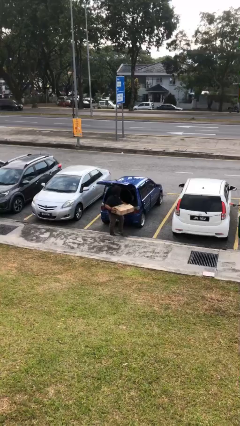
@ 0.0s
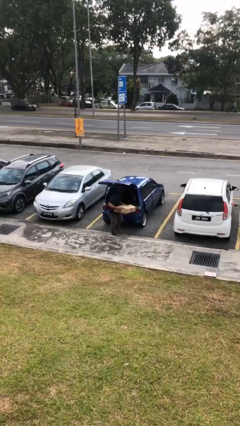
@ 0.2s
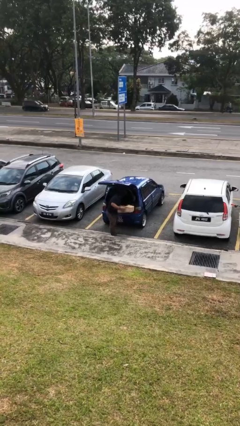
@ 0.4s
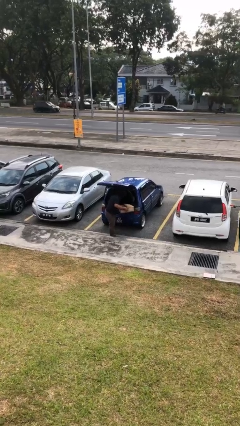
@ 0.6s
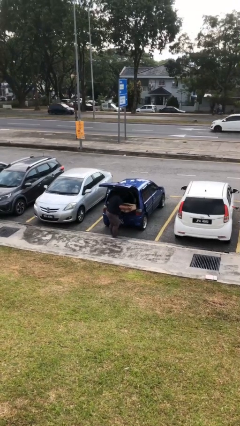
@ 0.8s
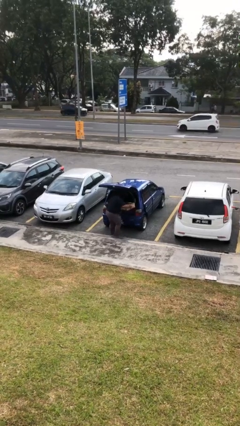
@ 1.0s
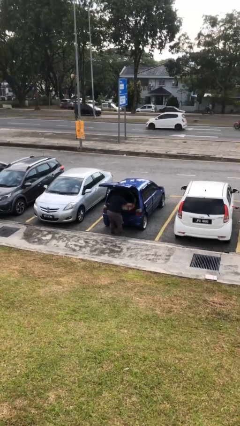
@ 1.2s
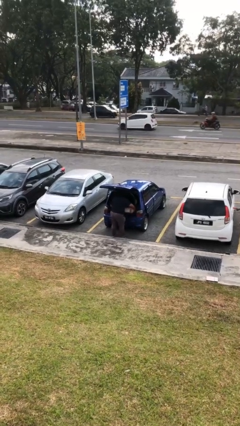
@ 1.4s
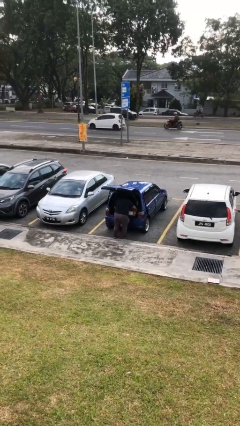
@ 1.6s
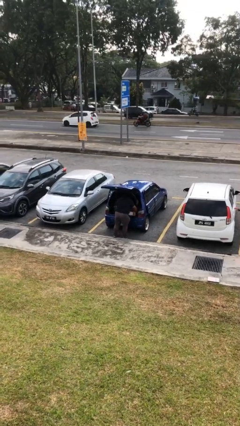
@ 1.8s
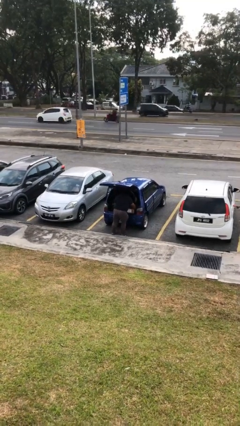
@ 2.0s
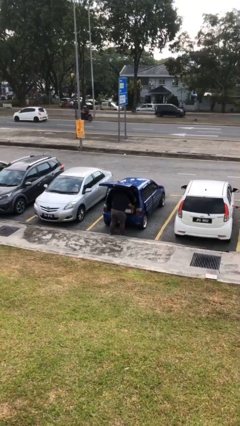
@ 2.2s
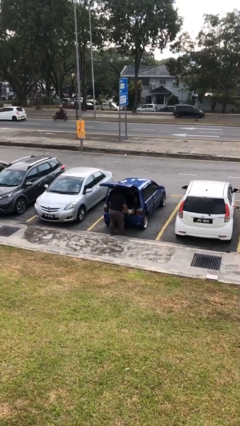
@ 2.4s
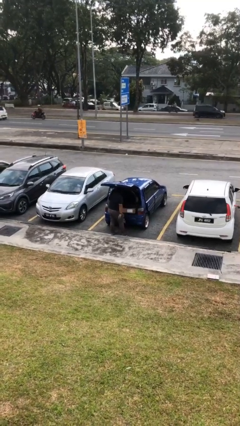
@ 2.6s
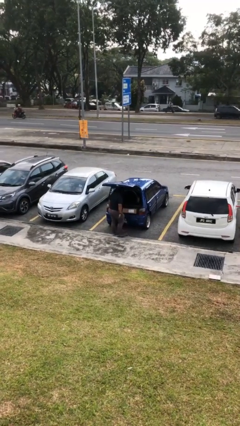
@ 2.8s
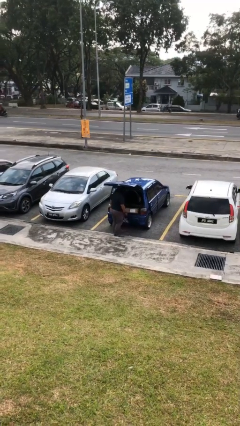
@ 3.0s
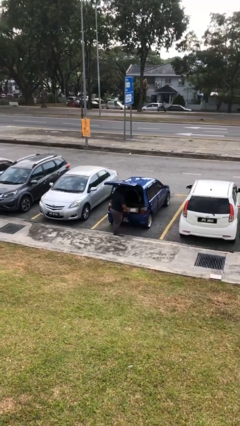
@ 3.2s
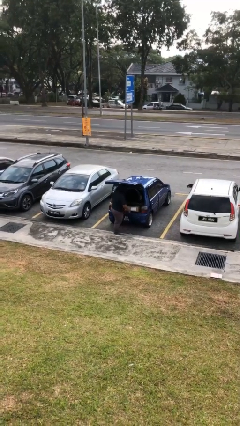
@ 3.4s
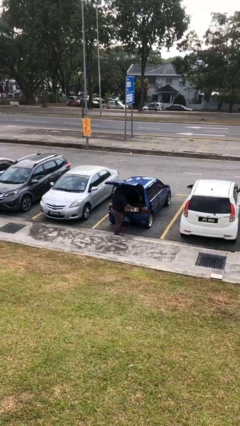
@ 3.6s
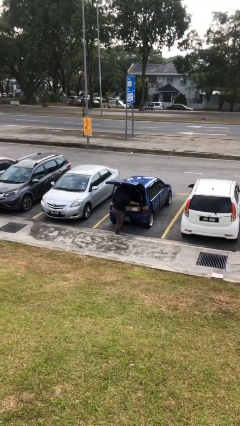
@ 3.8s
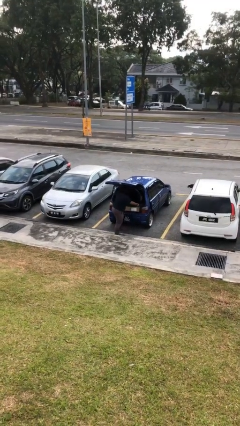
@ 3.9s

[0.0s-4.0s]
person loads car

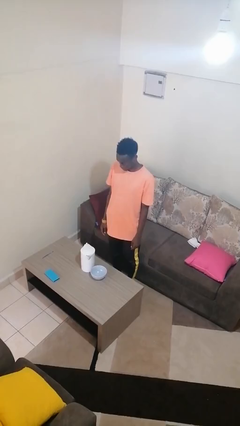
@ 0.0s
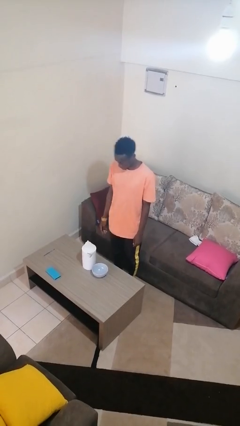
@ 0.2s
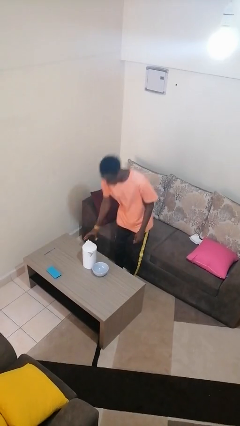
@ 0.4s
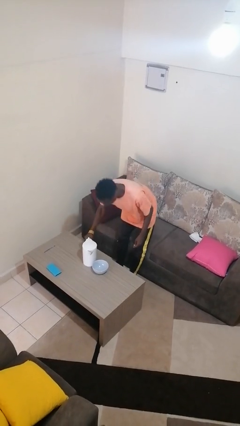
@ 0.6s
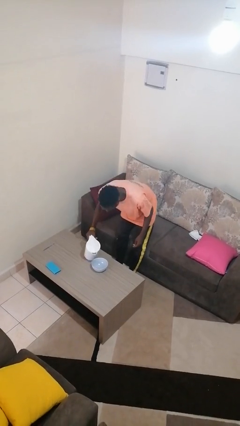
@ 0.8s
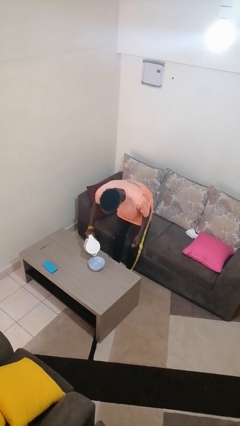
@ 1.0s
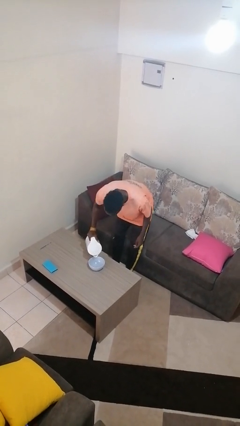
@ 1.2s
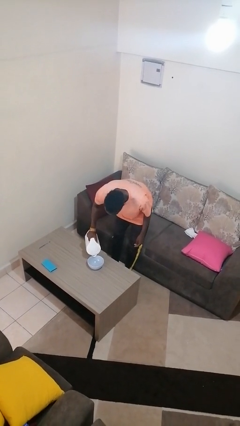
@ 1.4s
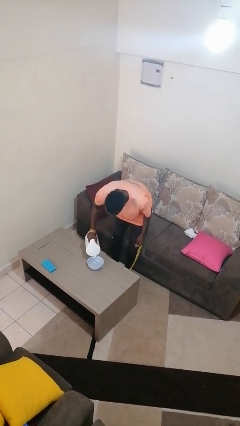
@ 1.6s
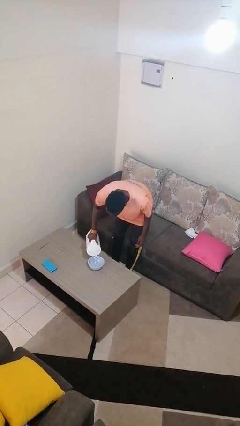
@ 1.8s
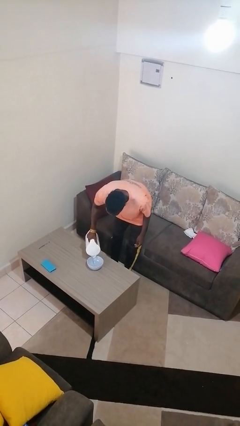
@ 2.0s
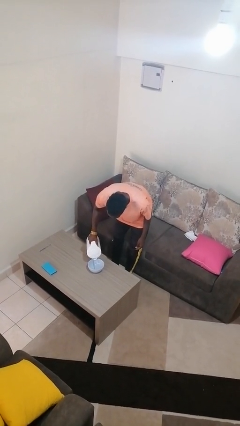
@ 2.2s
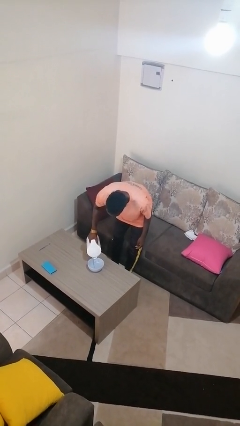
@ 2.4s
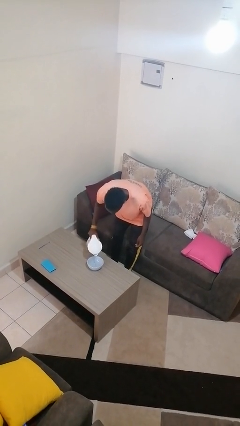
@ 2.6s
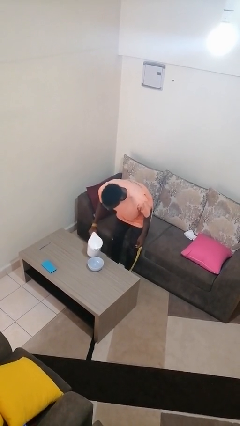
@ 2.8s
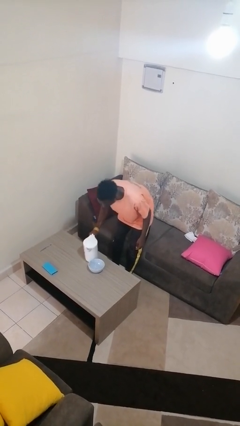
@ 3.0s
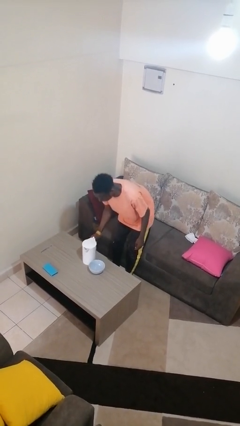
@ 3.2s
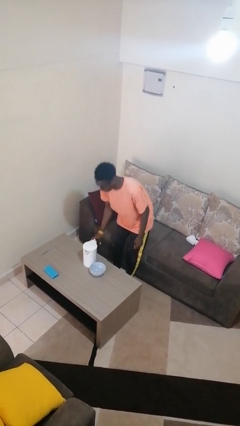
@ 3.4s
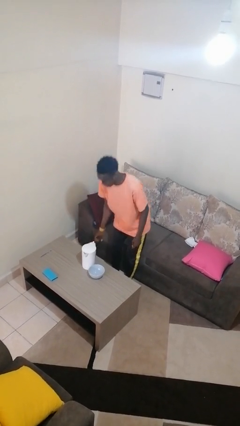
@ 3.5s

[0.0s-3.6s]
person pours into bowl

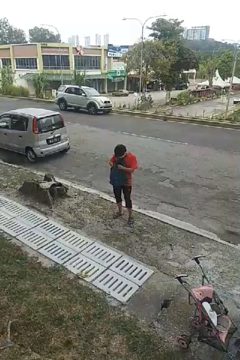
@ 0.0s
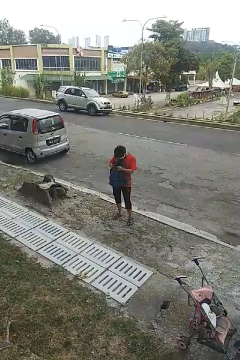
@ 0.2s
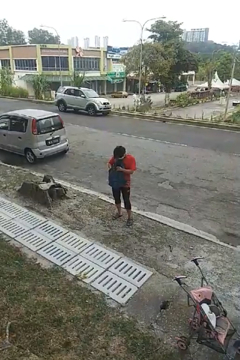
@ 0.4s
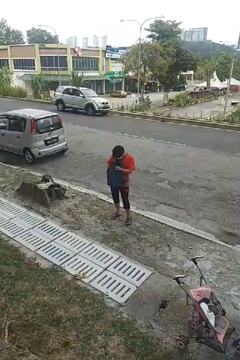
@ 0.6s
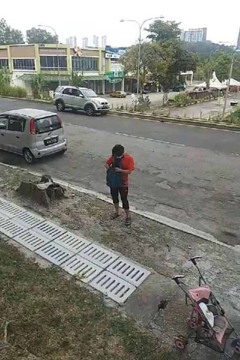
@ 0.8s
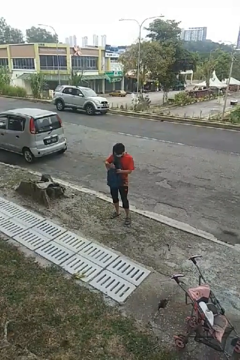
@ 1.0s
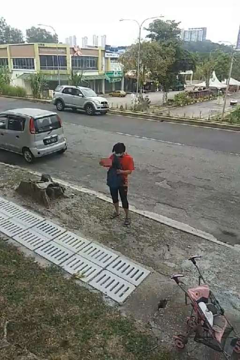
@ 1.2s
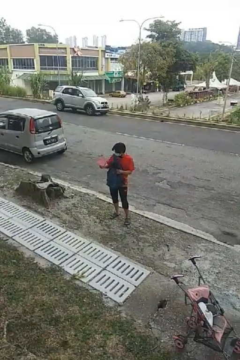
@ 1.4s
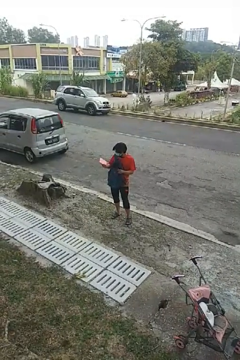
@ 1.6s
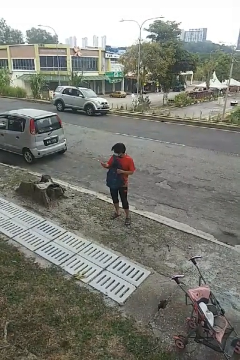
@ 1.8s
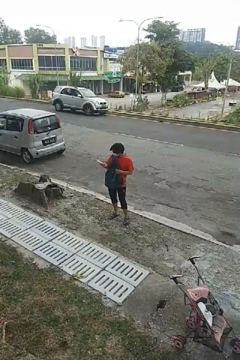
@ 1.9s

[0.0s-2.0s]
person takes object from backpack

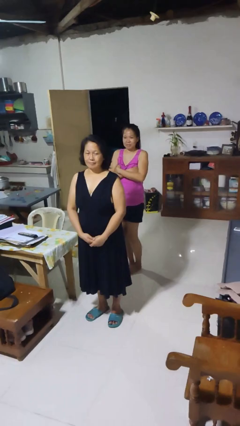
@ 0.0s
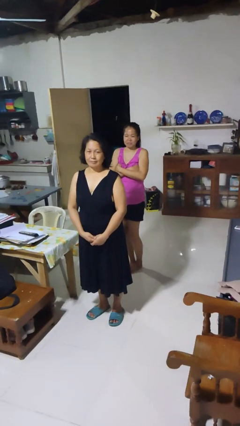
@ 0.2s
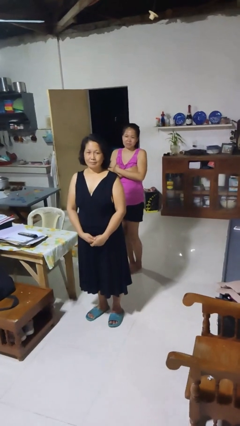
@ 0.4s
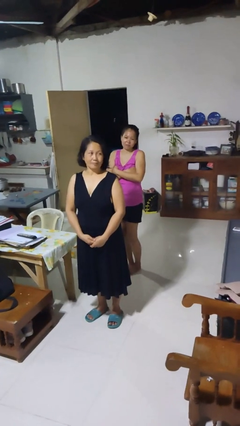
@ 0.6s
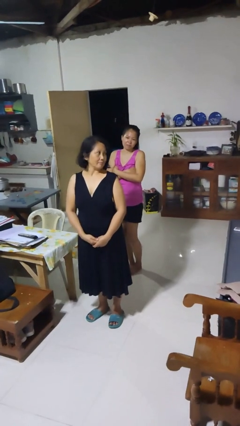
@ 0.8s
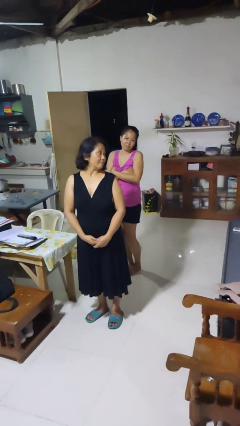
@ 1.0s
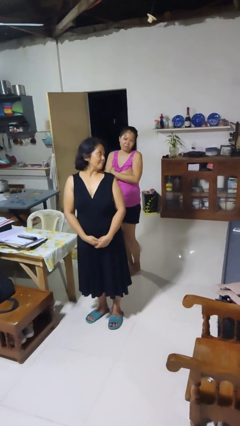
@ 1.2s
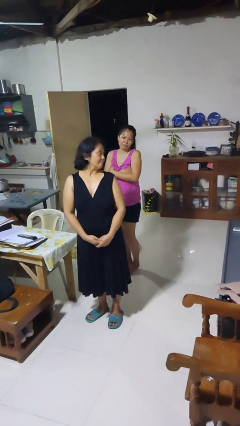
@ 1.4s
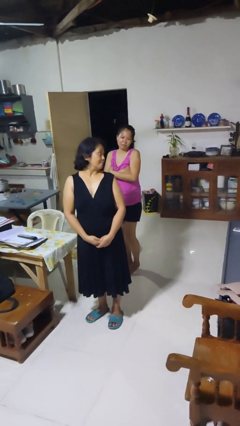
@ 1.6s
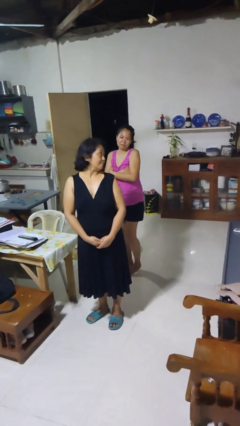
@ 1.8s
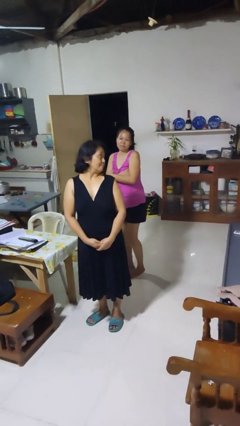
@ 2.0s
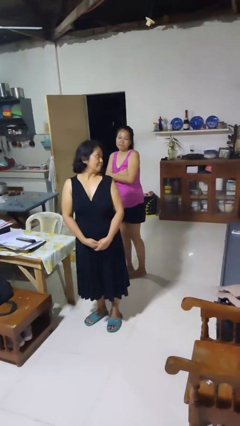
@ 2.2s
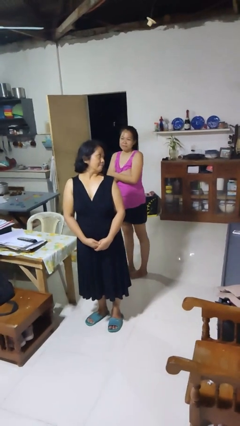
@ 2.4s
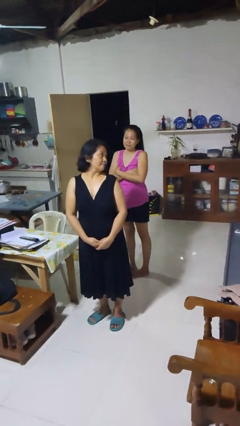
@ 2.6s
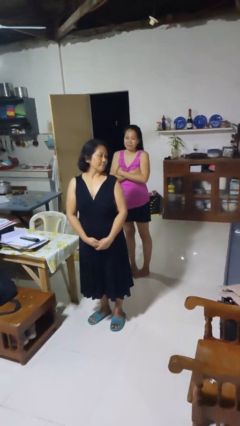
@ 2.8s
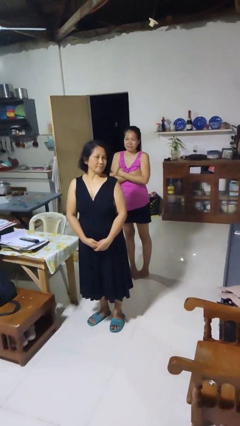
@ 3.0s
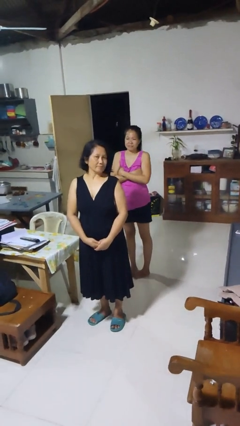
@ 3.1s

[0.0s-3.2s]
person looks over shoulder

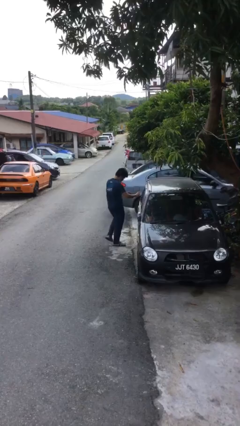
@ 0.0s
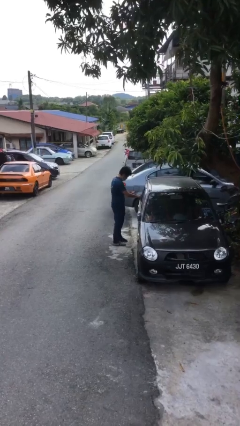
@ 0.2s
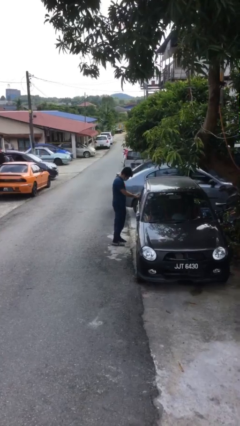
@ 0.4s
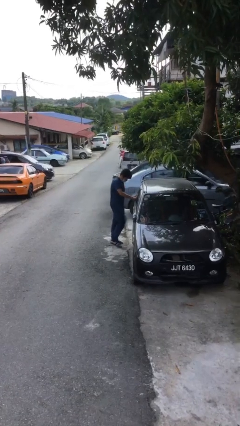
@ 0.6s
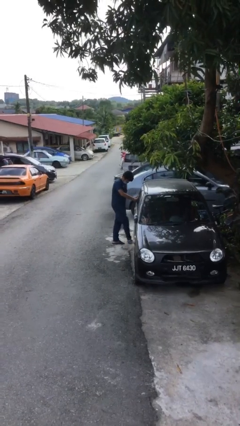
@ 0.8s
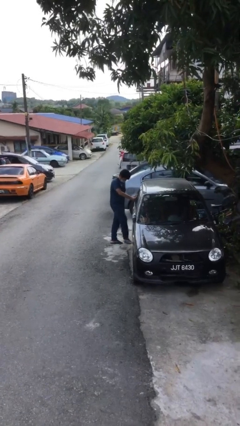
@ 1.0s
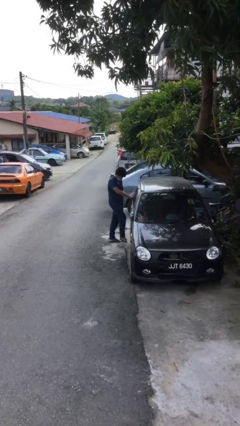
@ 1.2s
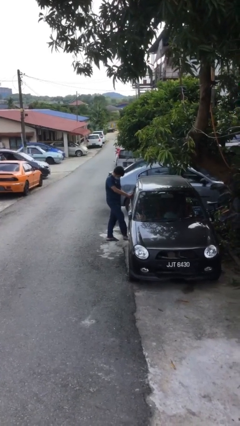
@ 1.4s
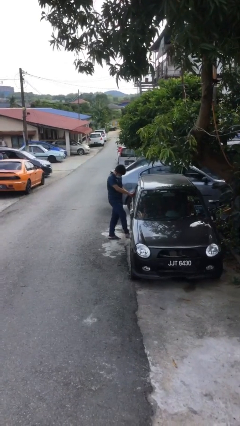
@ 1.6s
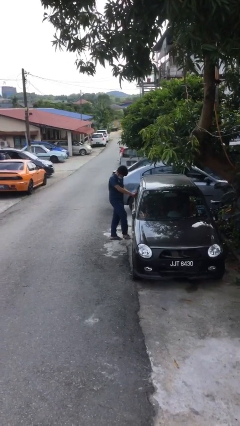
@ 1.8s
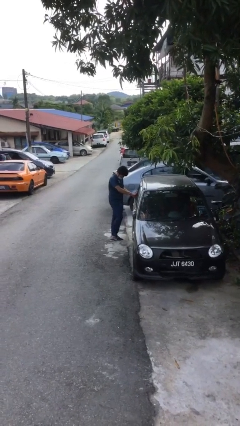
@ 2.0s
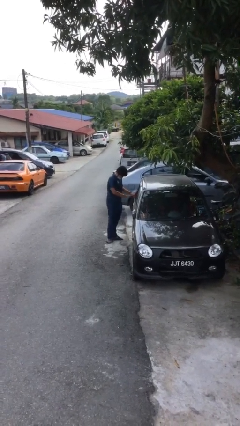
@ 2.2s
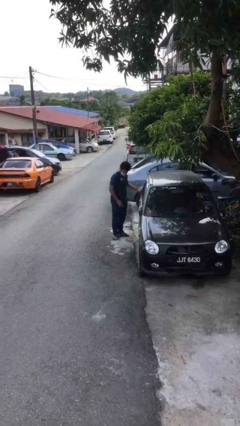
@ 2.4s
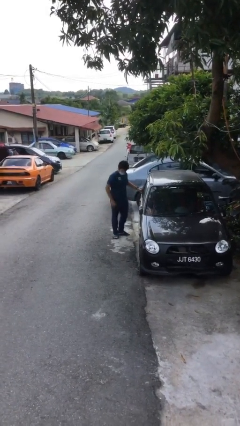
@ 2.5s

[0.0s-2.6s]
person kicks car tires

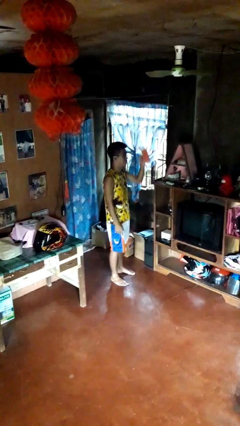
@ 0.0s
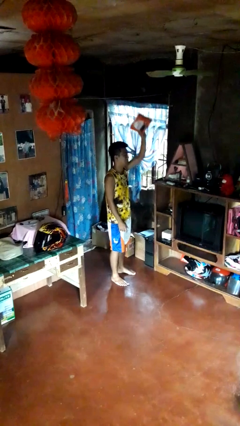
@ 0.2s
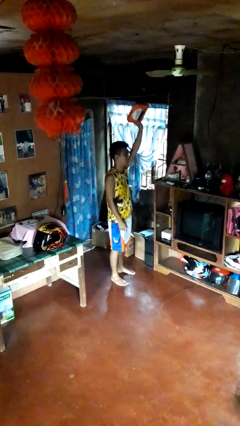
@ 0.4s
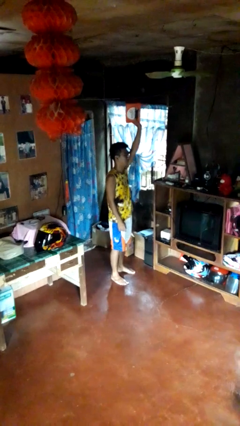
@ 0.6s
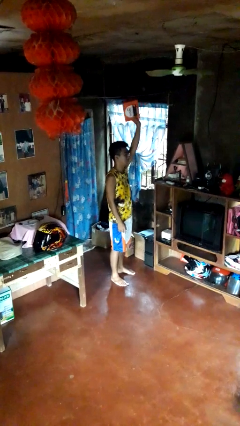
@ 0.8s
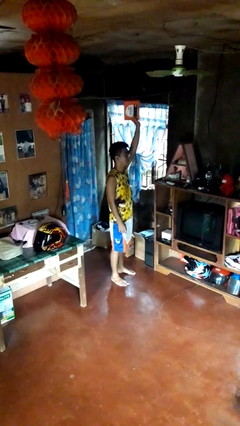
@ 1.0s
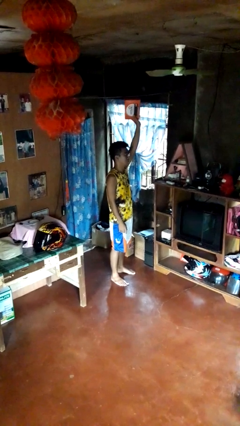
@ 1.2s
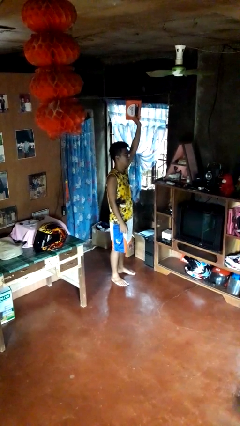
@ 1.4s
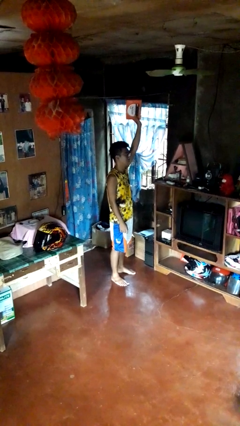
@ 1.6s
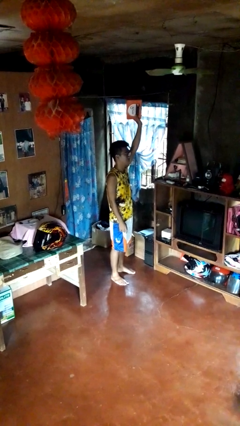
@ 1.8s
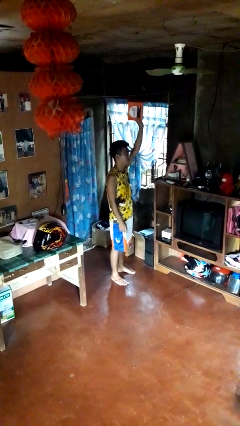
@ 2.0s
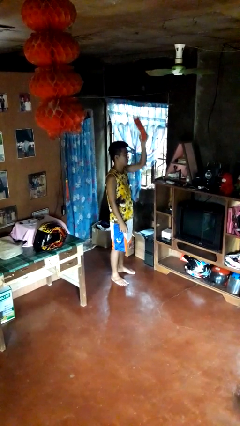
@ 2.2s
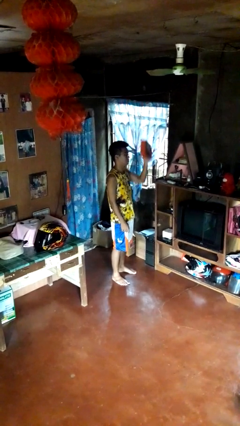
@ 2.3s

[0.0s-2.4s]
person holds object above head
